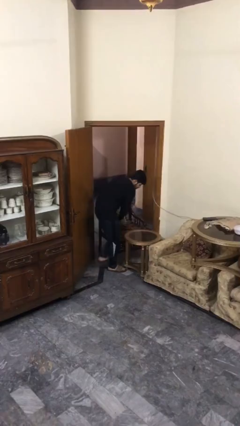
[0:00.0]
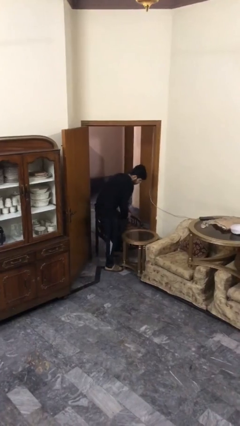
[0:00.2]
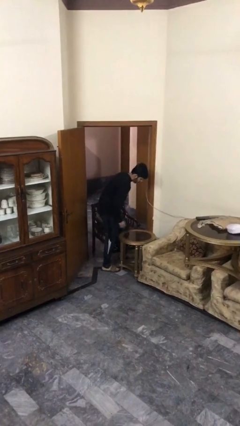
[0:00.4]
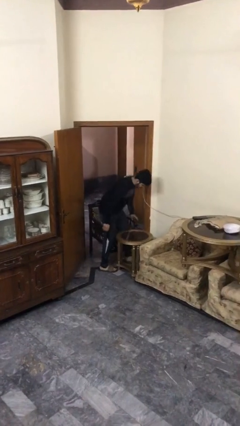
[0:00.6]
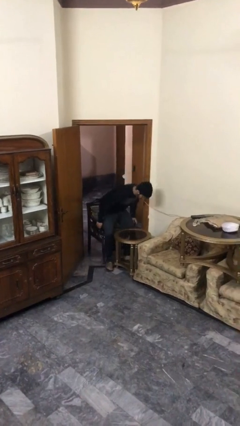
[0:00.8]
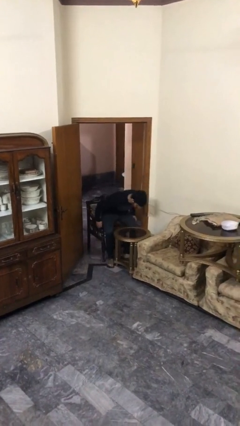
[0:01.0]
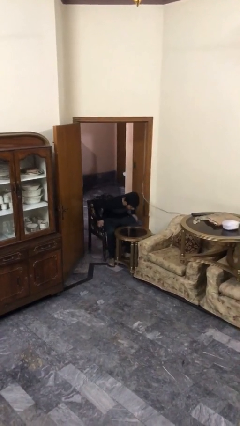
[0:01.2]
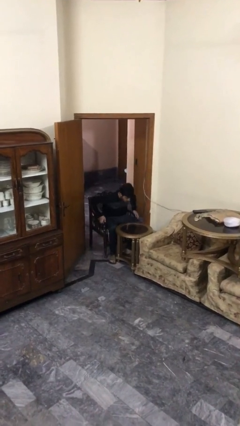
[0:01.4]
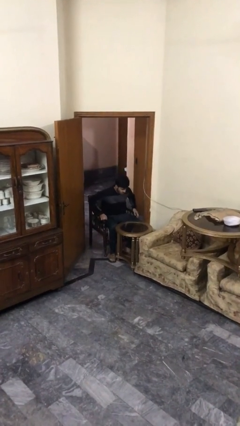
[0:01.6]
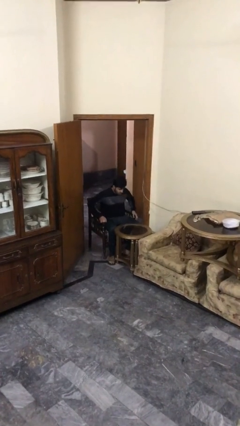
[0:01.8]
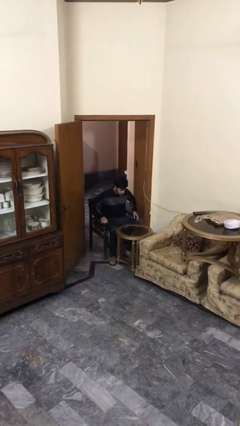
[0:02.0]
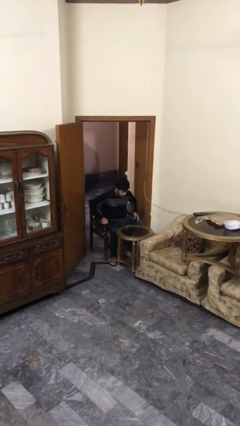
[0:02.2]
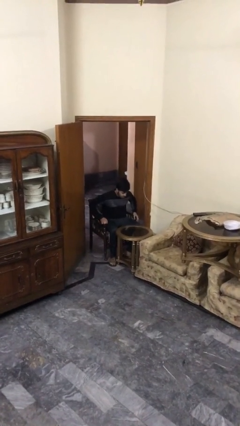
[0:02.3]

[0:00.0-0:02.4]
person sits down

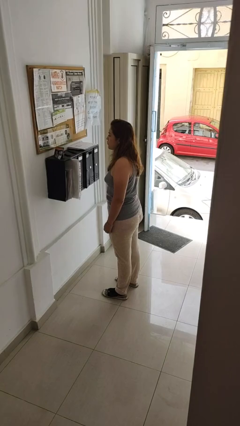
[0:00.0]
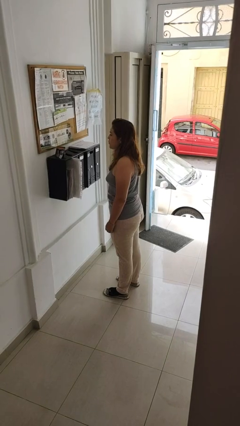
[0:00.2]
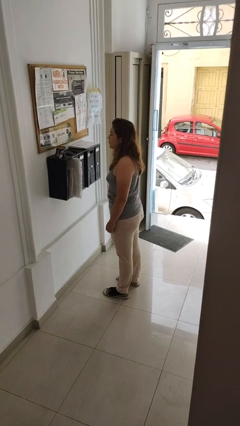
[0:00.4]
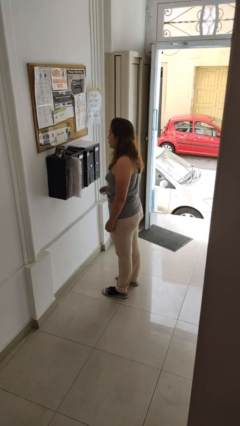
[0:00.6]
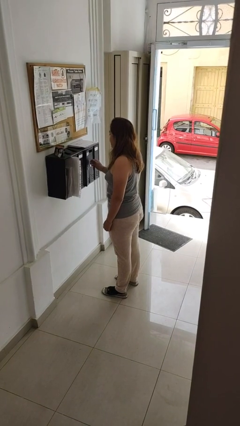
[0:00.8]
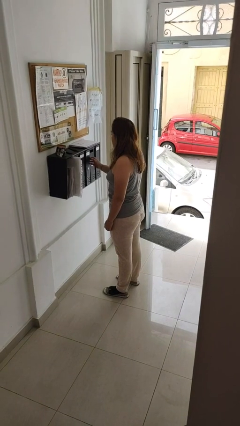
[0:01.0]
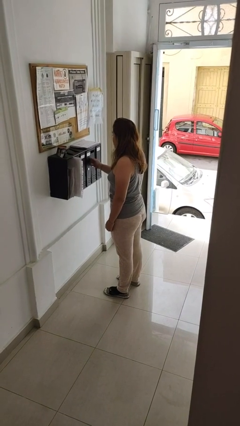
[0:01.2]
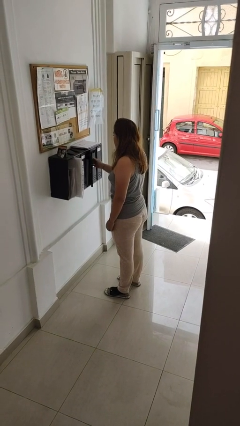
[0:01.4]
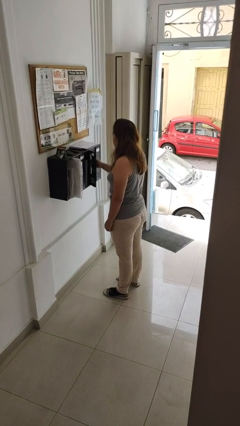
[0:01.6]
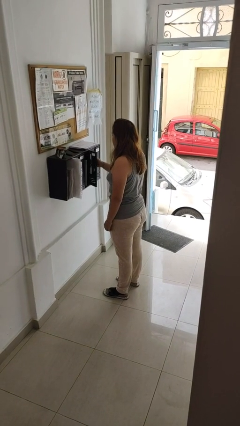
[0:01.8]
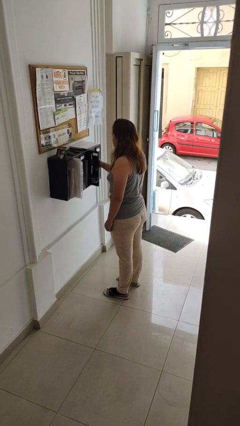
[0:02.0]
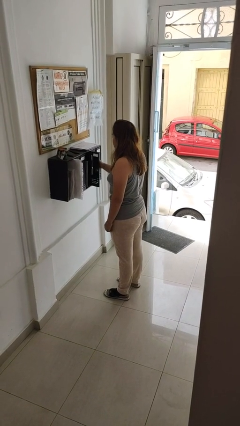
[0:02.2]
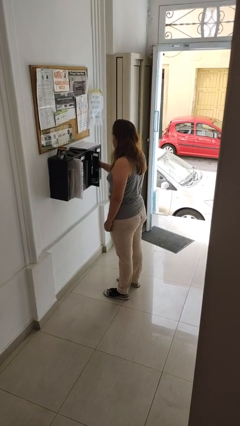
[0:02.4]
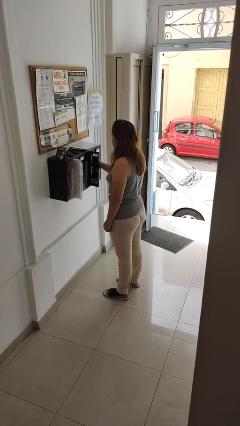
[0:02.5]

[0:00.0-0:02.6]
person opens mailbox

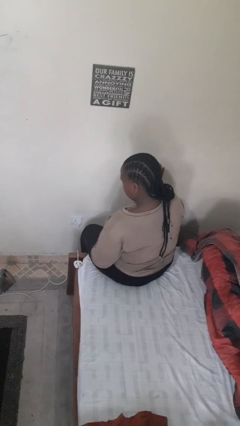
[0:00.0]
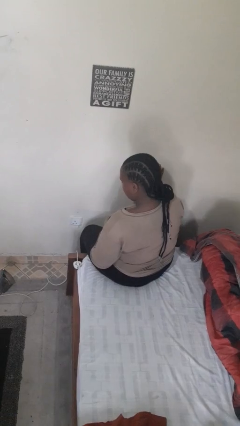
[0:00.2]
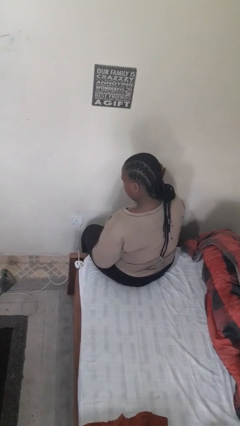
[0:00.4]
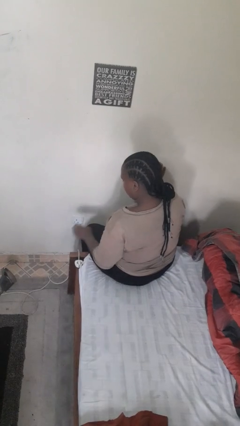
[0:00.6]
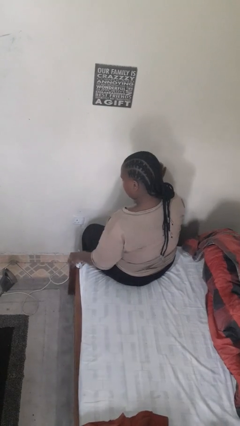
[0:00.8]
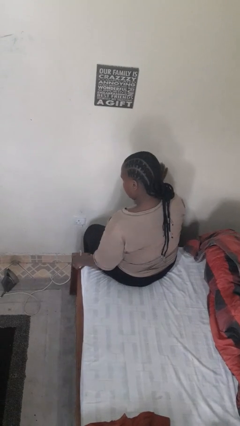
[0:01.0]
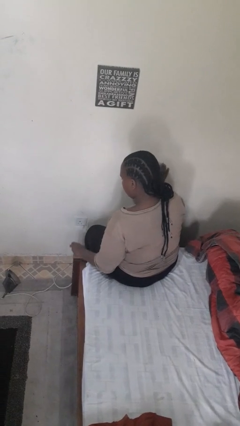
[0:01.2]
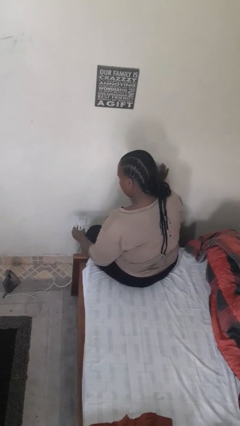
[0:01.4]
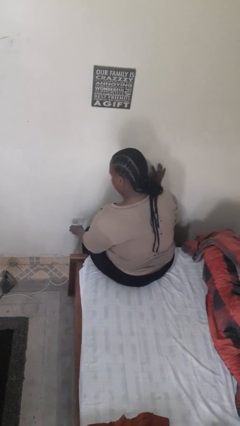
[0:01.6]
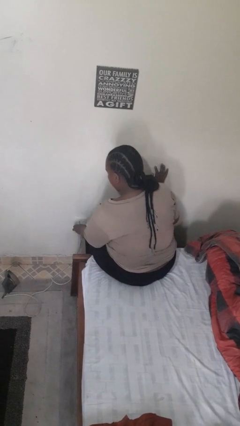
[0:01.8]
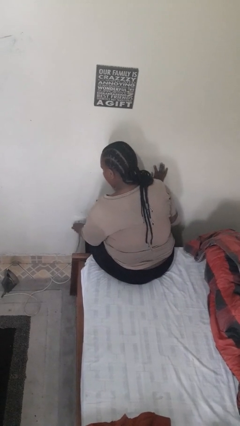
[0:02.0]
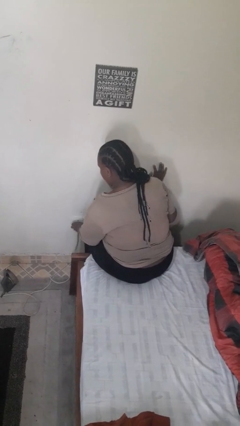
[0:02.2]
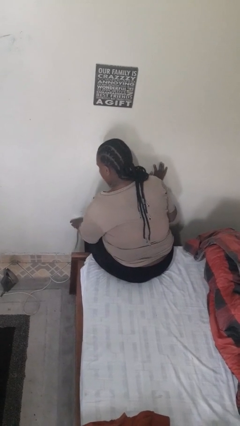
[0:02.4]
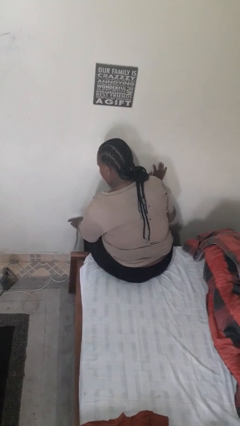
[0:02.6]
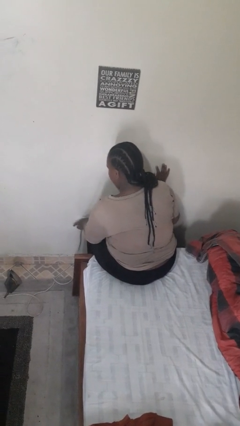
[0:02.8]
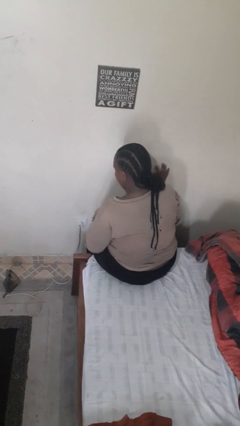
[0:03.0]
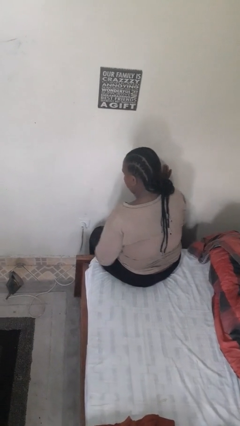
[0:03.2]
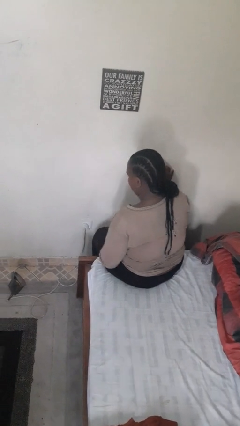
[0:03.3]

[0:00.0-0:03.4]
person plugs into electrical socket

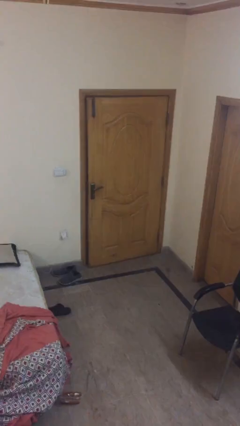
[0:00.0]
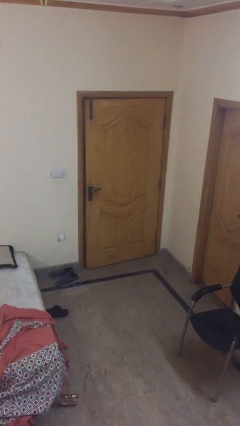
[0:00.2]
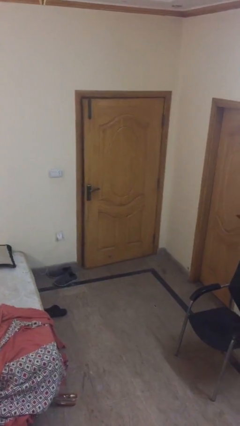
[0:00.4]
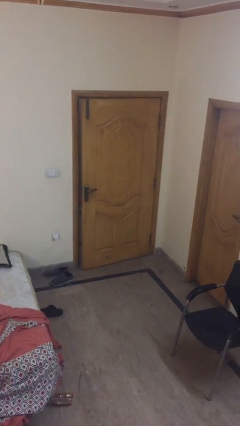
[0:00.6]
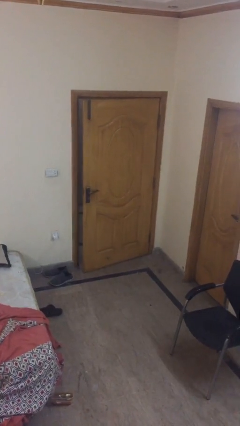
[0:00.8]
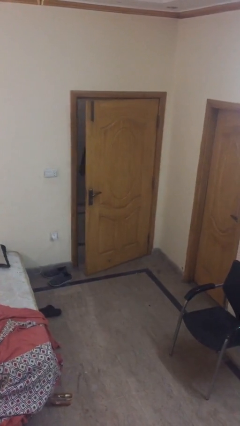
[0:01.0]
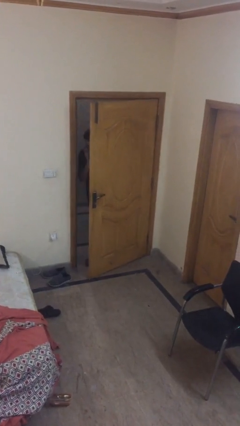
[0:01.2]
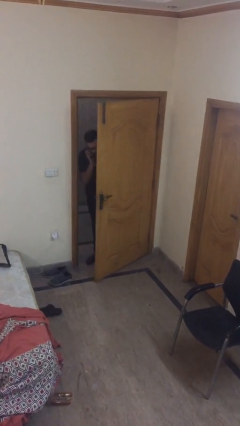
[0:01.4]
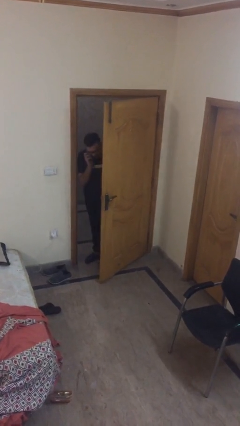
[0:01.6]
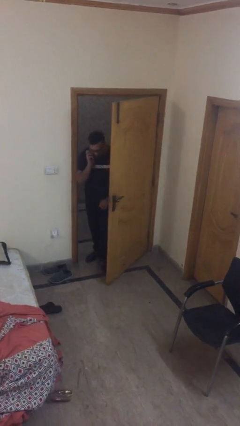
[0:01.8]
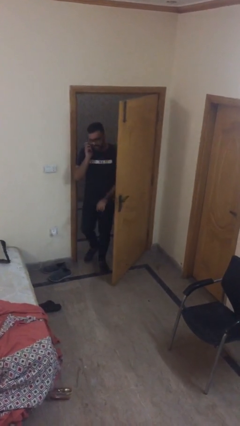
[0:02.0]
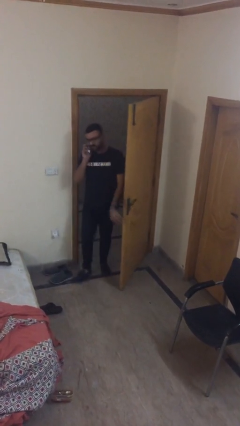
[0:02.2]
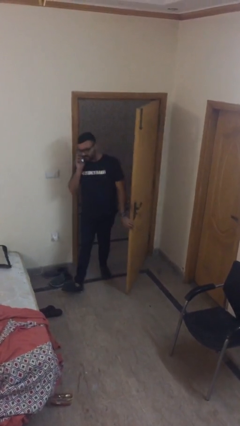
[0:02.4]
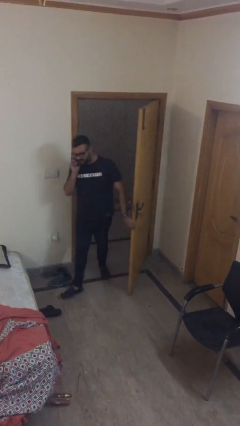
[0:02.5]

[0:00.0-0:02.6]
person opens facility door

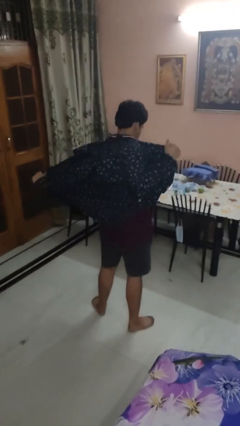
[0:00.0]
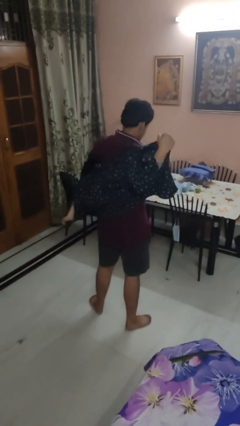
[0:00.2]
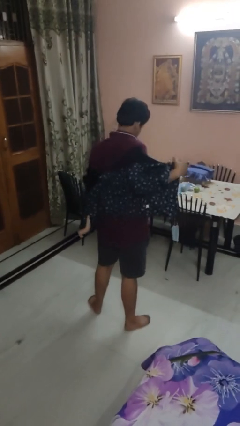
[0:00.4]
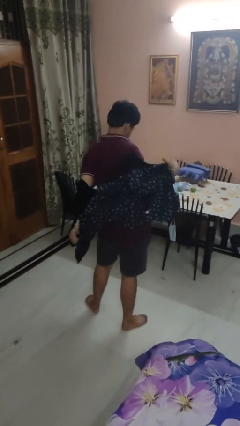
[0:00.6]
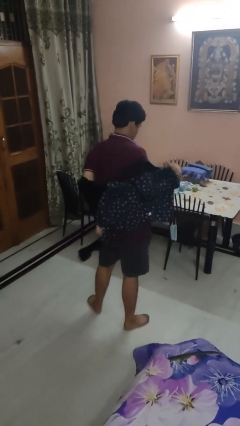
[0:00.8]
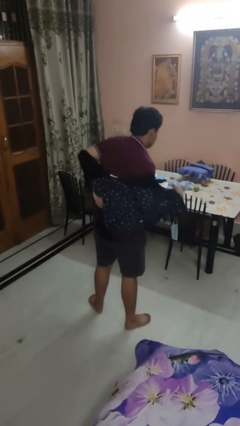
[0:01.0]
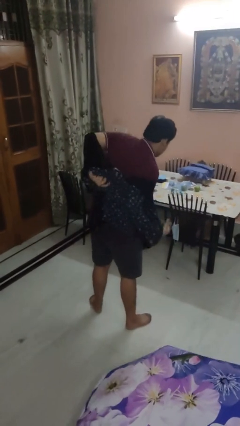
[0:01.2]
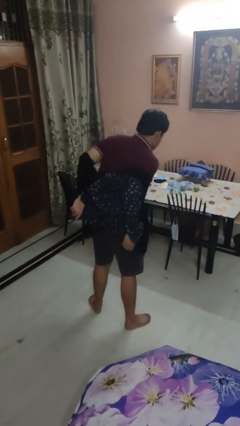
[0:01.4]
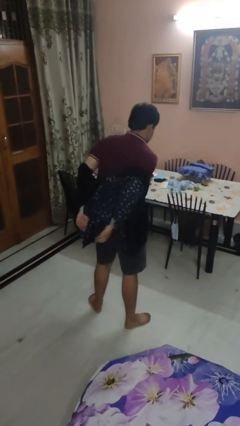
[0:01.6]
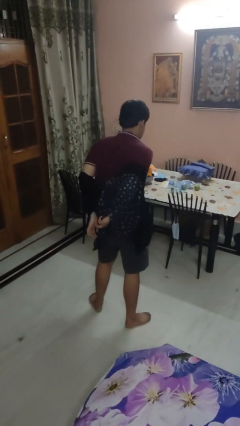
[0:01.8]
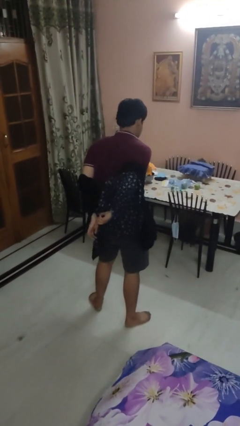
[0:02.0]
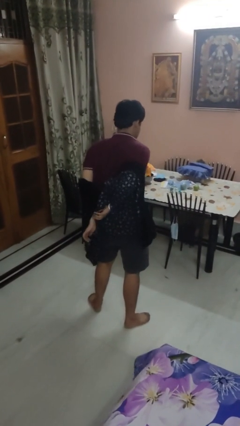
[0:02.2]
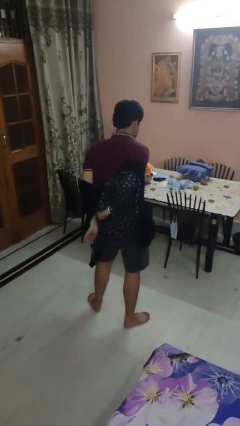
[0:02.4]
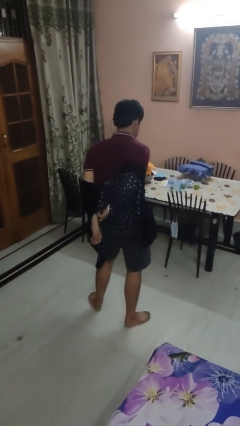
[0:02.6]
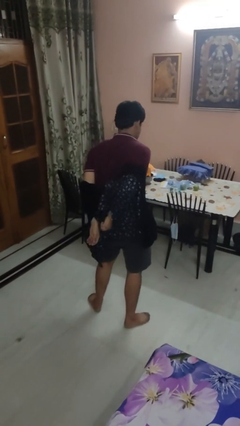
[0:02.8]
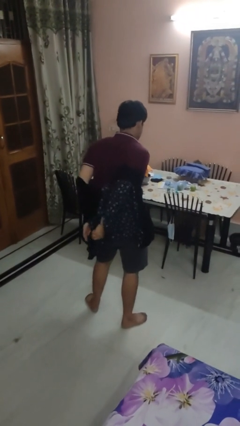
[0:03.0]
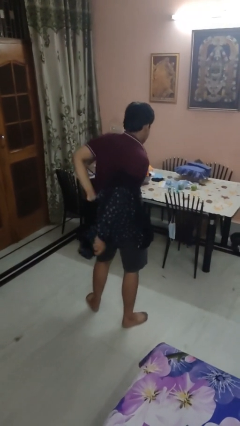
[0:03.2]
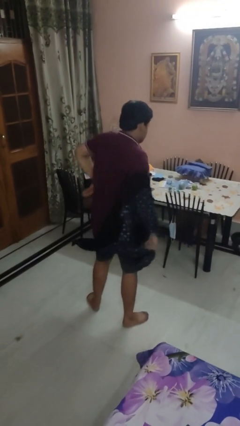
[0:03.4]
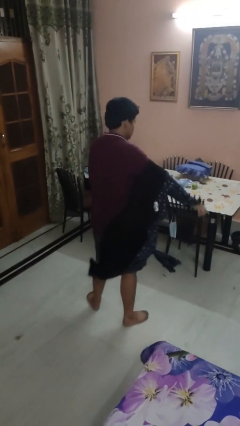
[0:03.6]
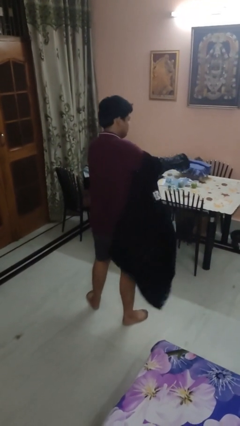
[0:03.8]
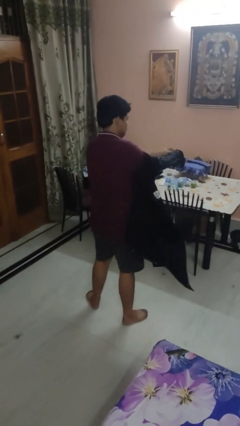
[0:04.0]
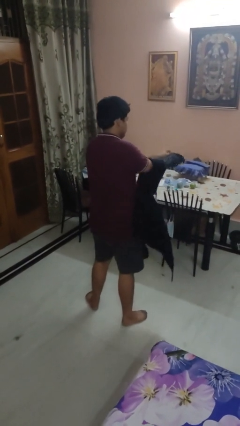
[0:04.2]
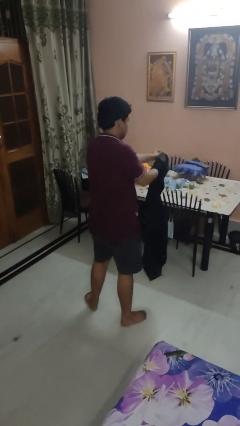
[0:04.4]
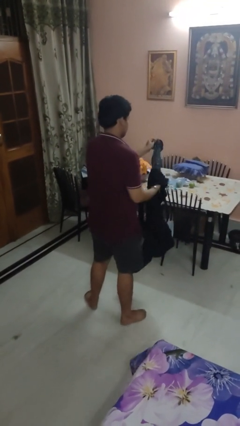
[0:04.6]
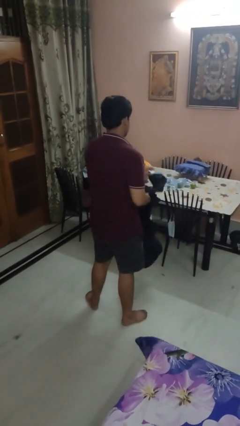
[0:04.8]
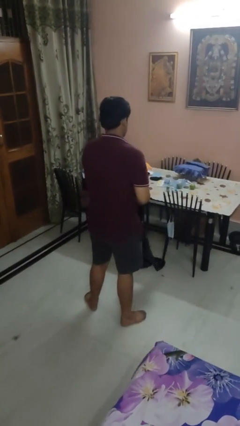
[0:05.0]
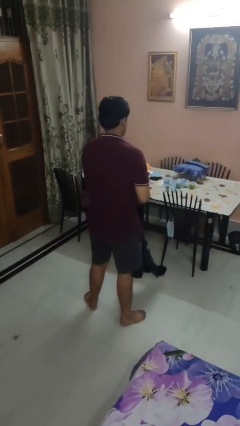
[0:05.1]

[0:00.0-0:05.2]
person takes off shirt

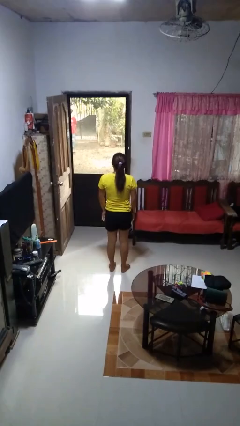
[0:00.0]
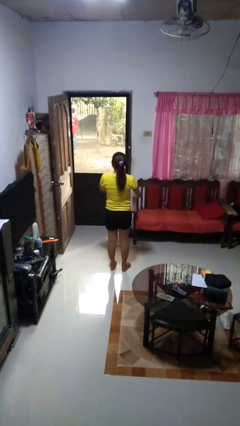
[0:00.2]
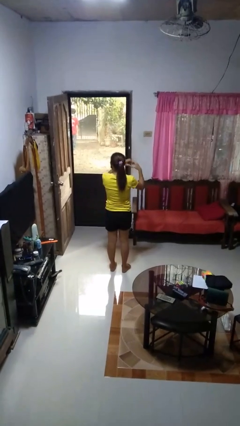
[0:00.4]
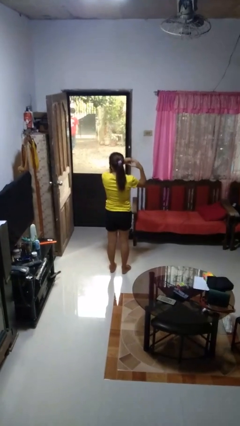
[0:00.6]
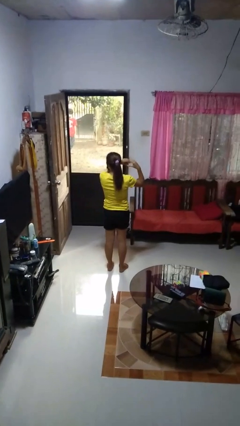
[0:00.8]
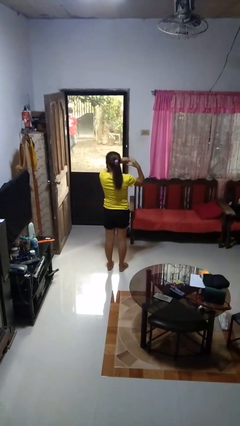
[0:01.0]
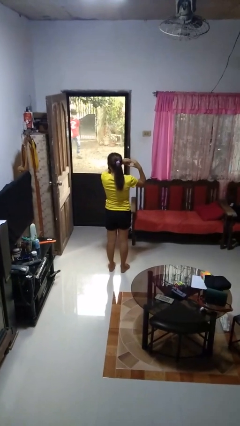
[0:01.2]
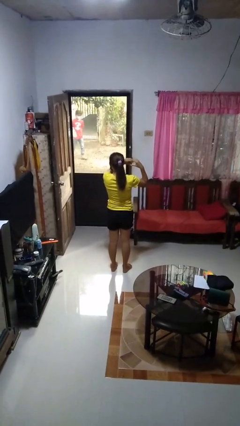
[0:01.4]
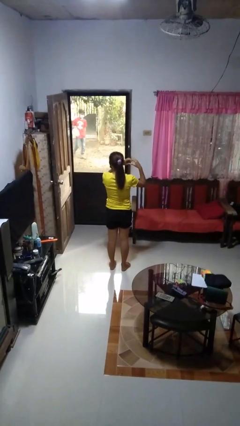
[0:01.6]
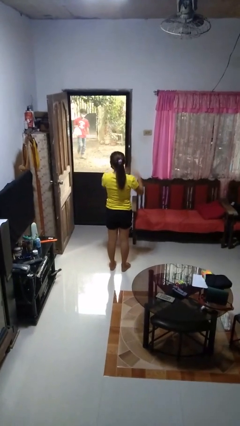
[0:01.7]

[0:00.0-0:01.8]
person gestures heart
